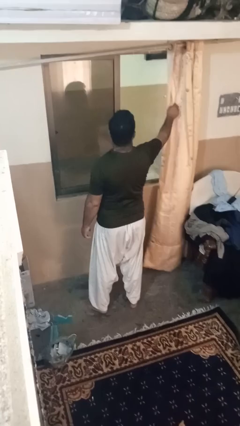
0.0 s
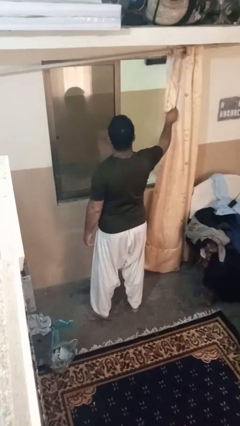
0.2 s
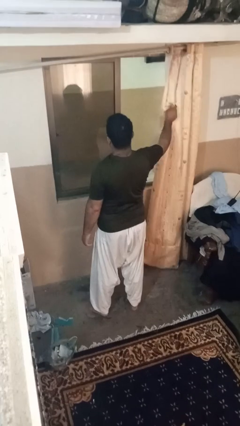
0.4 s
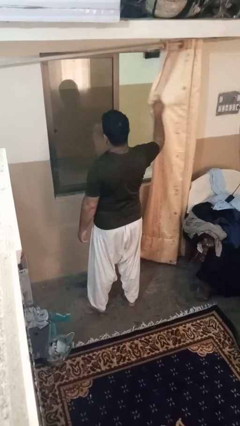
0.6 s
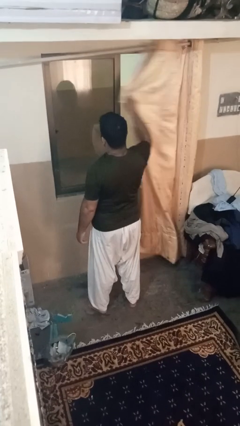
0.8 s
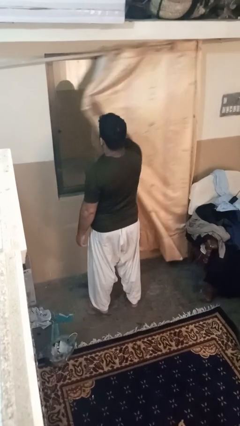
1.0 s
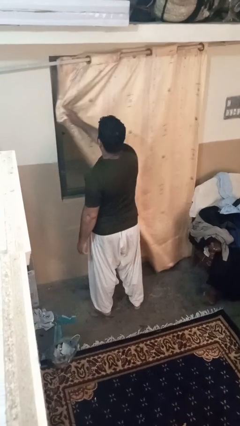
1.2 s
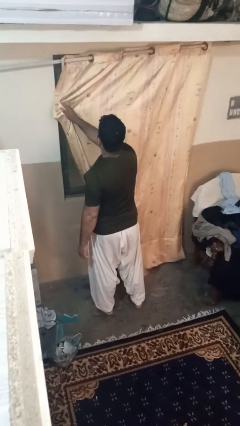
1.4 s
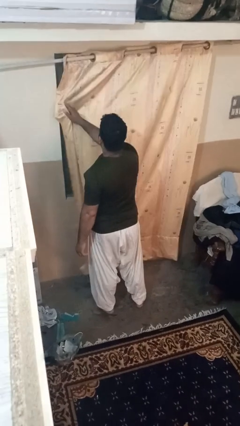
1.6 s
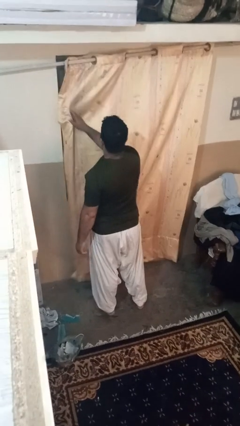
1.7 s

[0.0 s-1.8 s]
person closes curtains

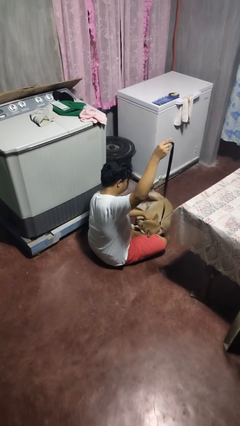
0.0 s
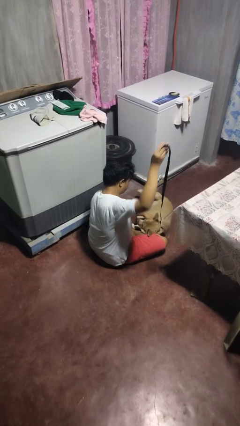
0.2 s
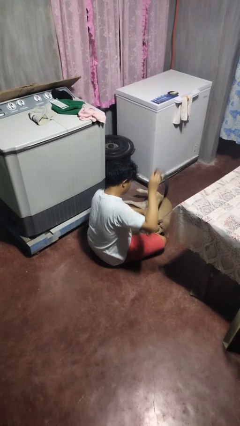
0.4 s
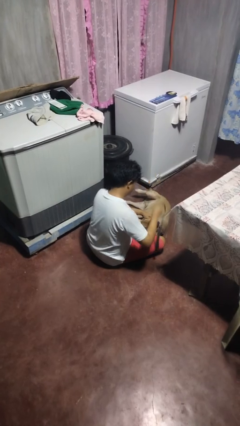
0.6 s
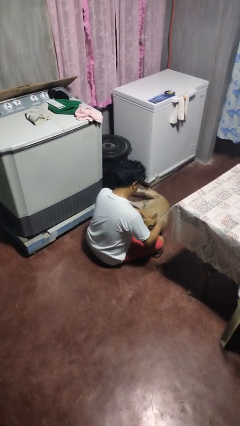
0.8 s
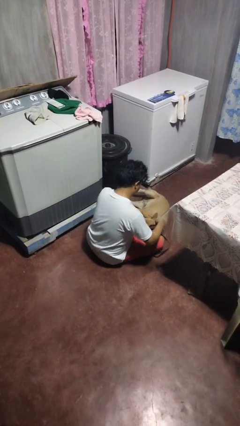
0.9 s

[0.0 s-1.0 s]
person unattaches leash from dog

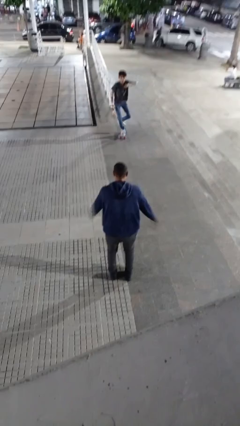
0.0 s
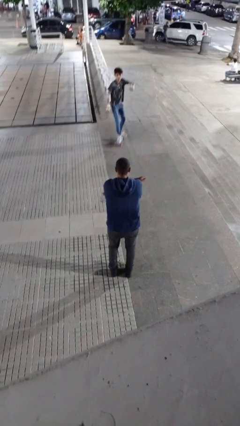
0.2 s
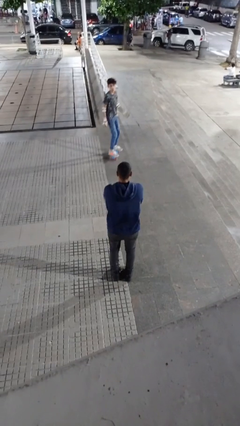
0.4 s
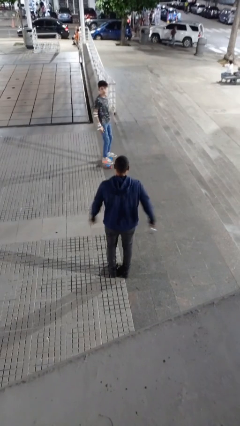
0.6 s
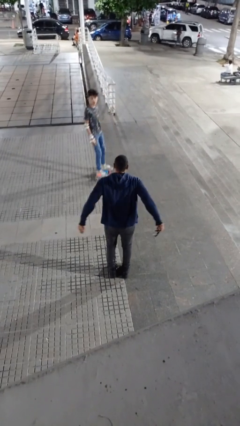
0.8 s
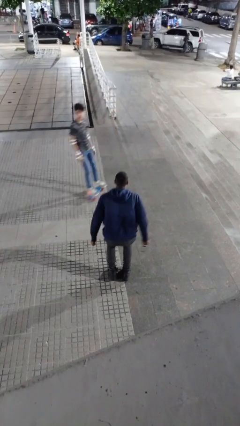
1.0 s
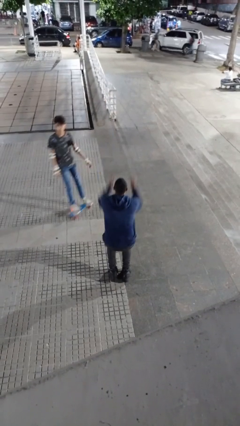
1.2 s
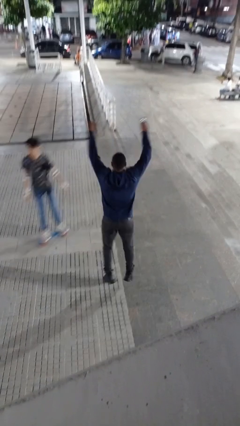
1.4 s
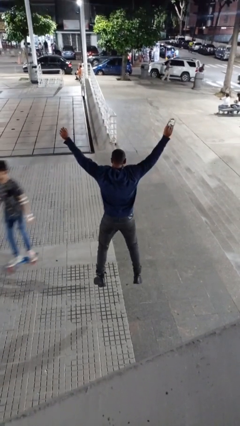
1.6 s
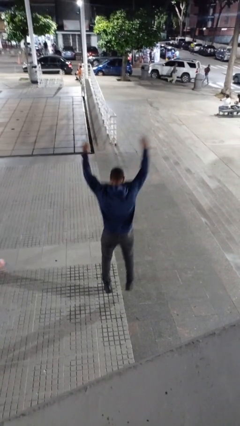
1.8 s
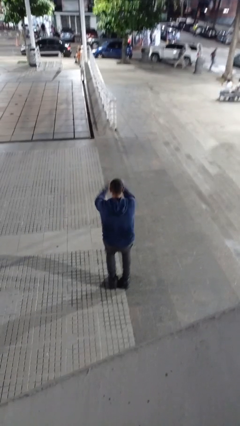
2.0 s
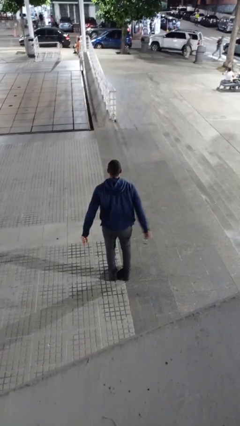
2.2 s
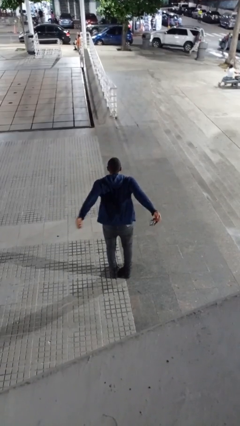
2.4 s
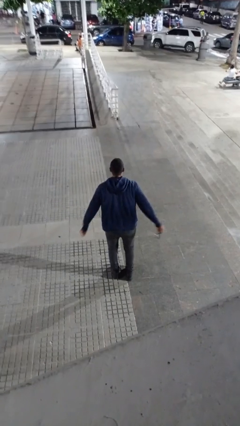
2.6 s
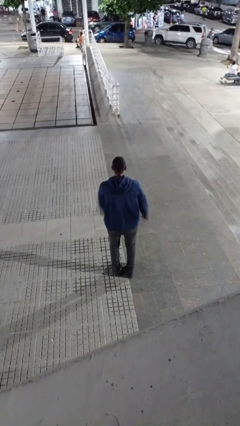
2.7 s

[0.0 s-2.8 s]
person jumps

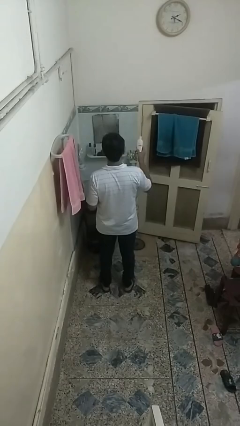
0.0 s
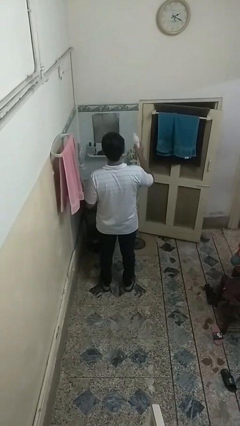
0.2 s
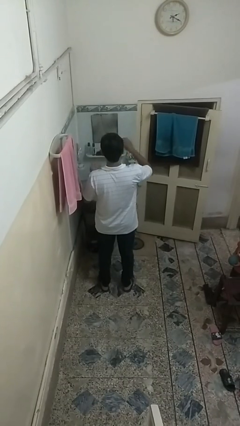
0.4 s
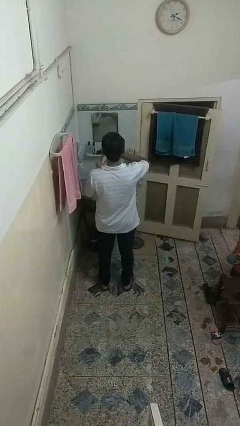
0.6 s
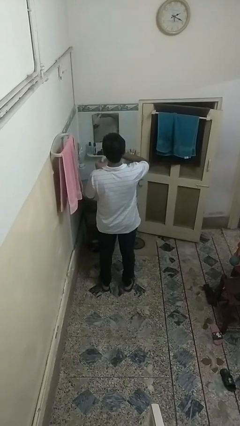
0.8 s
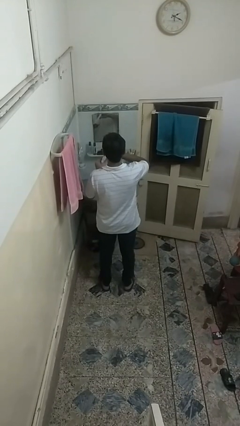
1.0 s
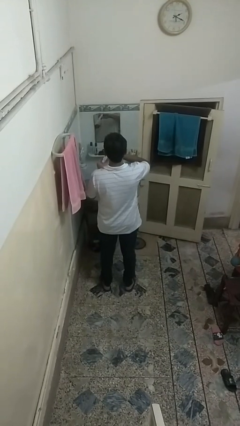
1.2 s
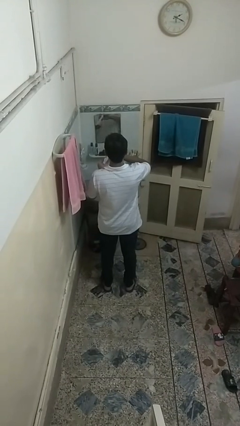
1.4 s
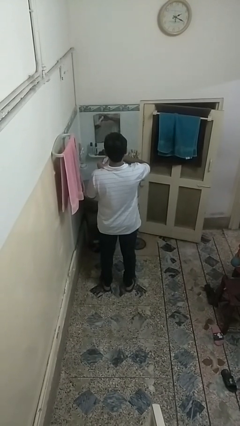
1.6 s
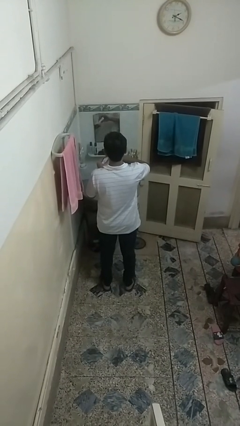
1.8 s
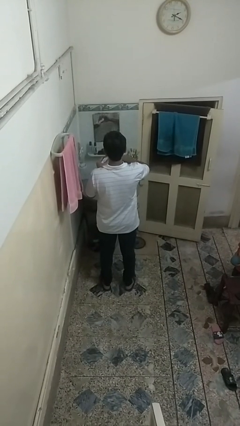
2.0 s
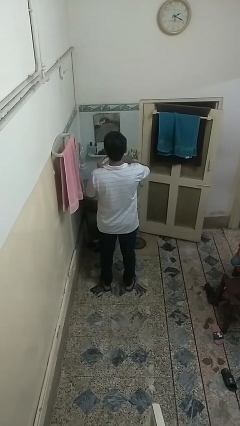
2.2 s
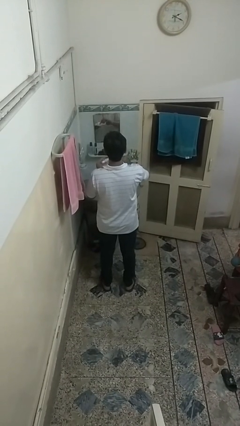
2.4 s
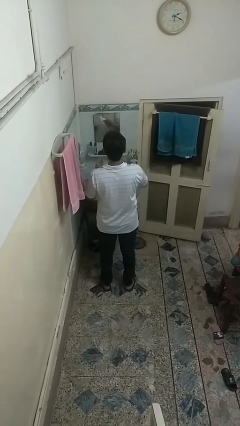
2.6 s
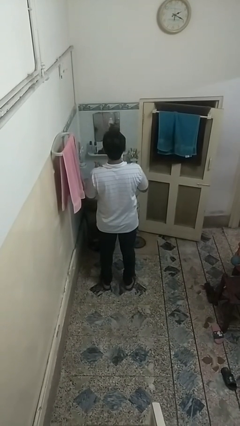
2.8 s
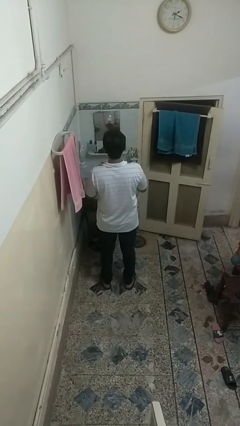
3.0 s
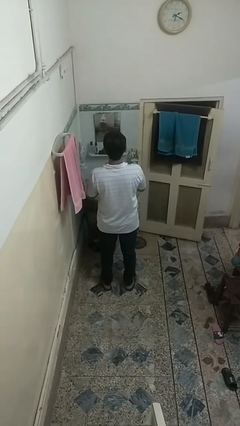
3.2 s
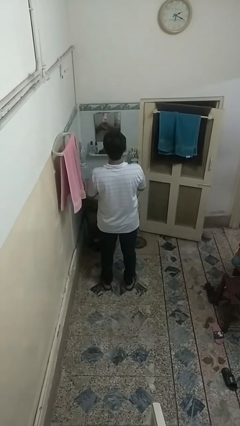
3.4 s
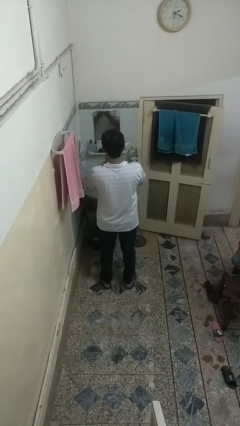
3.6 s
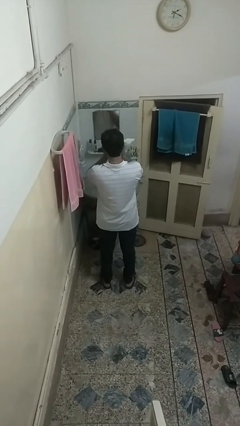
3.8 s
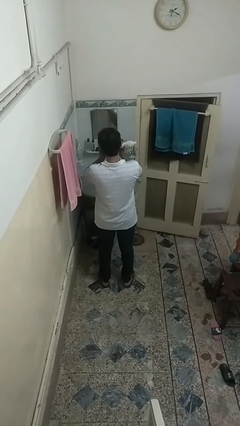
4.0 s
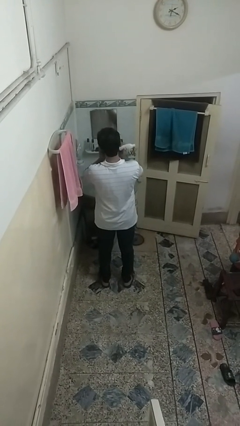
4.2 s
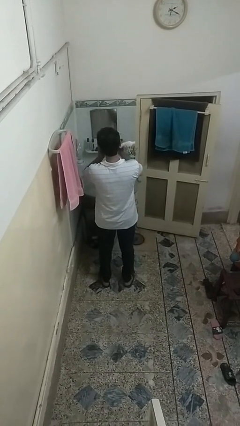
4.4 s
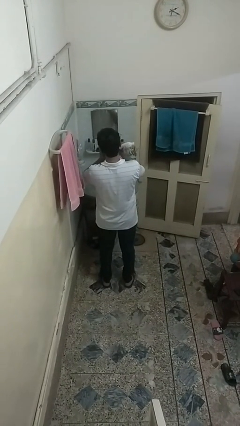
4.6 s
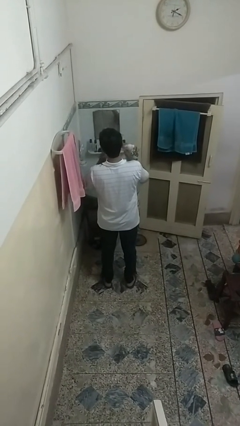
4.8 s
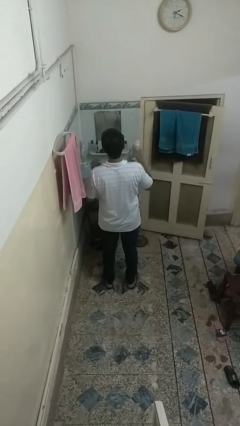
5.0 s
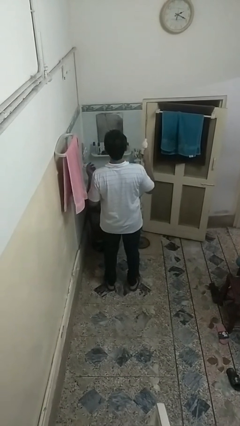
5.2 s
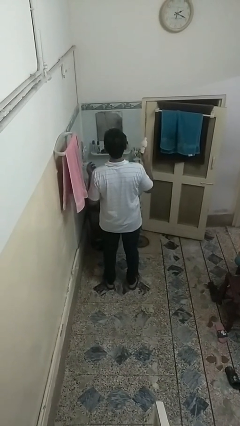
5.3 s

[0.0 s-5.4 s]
person applies facial moisturizer

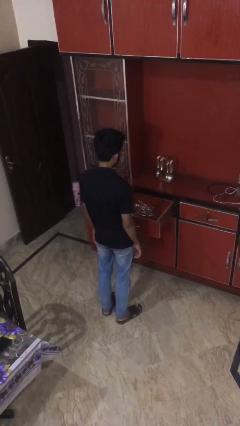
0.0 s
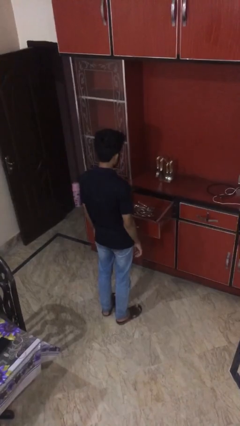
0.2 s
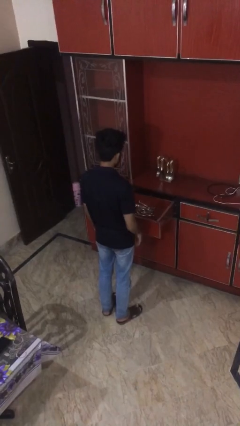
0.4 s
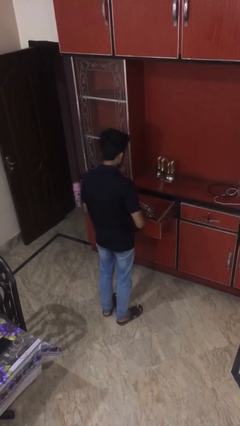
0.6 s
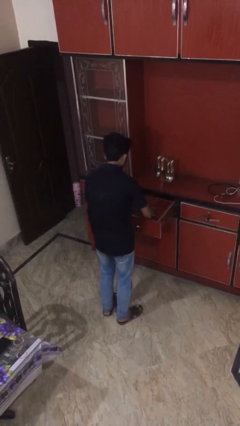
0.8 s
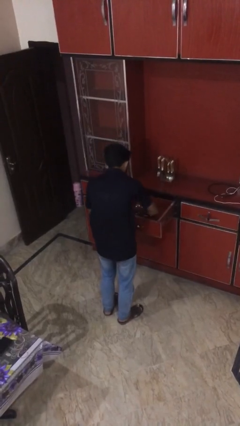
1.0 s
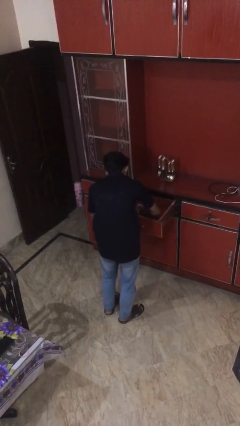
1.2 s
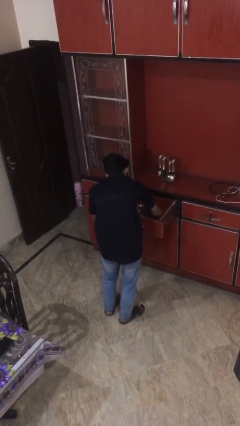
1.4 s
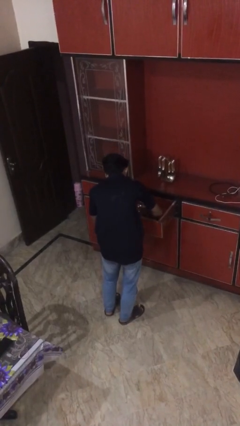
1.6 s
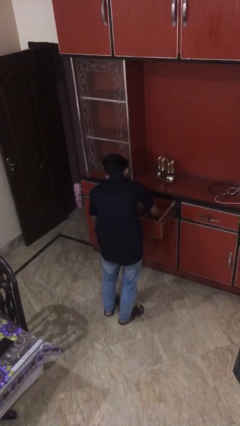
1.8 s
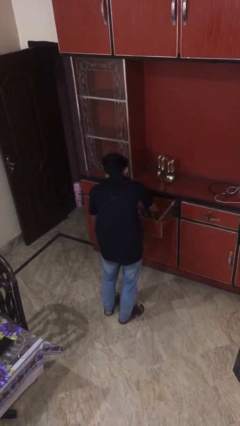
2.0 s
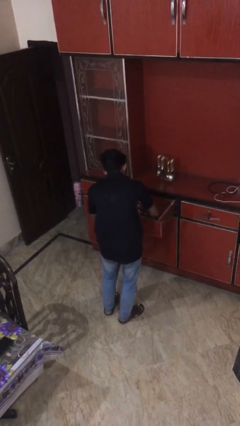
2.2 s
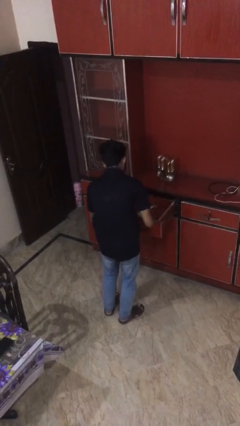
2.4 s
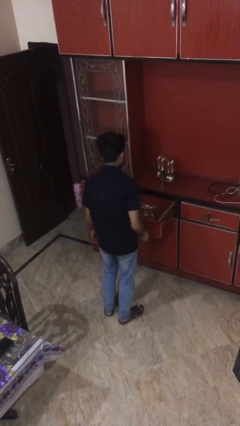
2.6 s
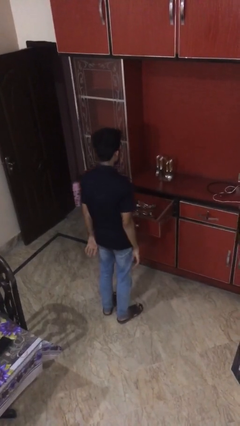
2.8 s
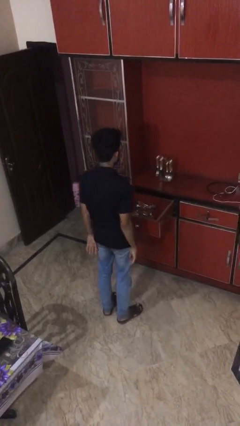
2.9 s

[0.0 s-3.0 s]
person searches in kitchen drawer

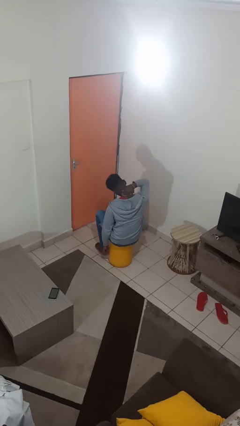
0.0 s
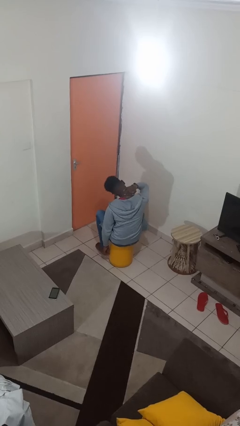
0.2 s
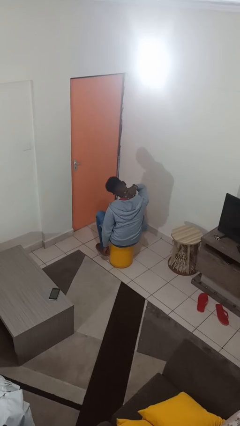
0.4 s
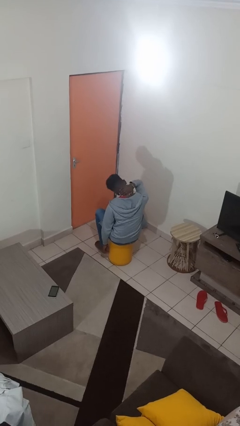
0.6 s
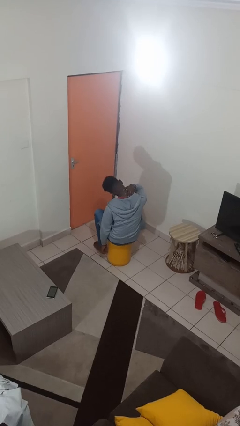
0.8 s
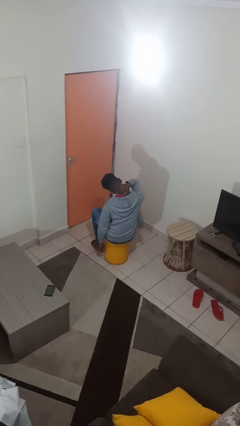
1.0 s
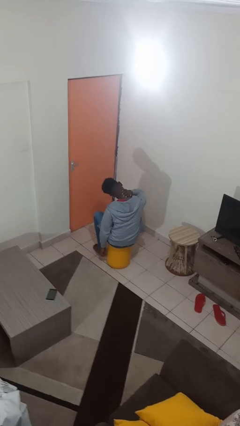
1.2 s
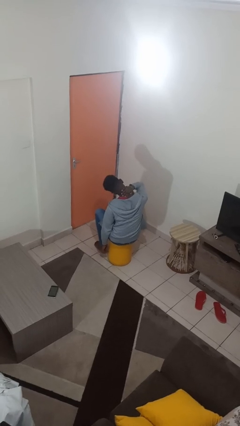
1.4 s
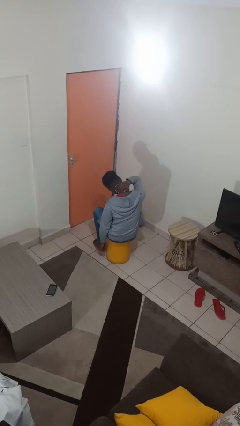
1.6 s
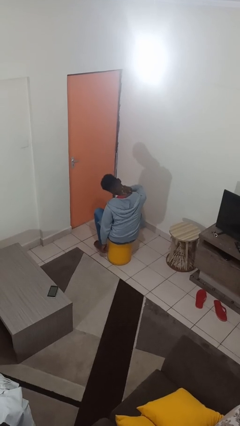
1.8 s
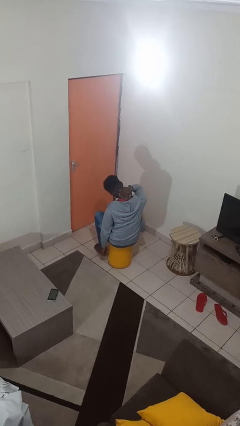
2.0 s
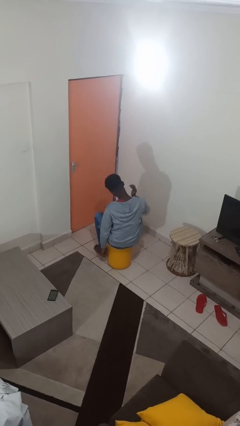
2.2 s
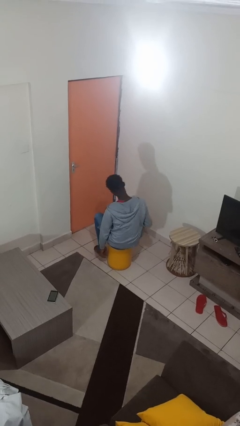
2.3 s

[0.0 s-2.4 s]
person rubs neck

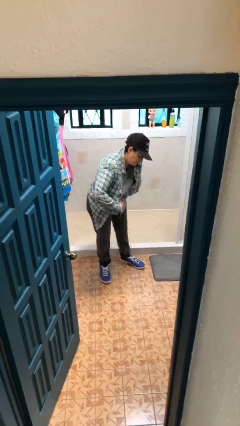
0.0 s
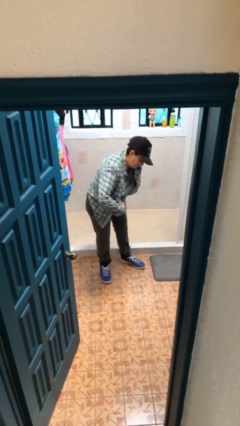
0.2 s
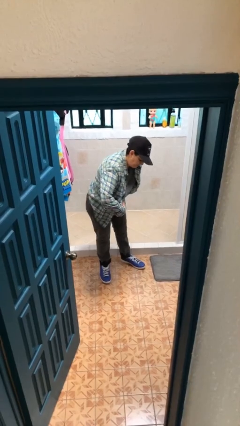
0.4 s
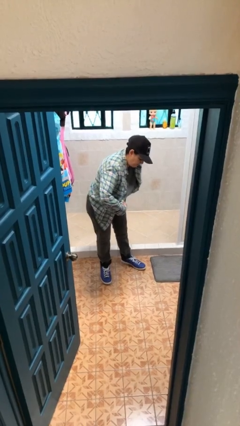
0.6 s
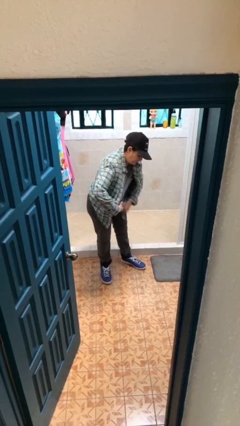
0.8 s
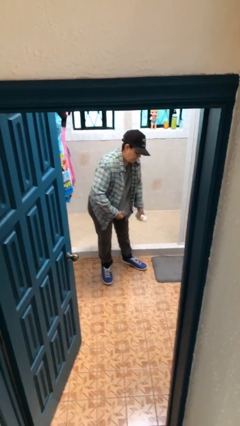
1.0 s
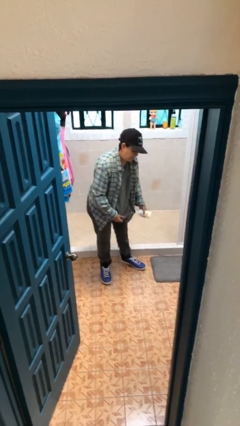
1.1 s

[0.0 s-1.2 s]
person applies deodorant

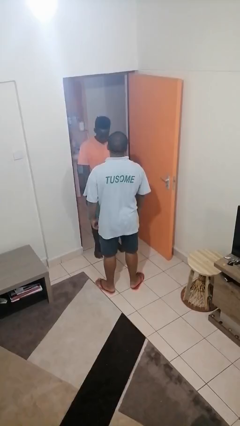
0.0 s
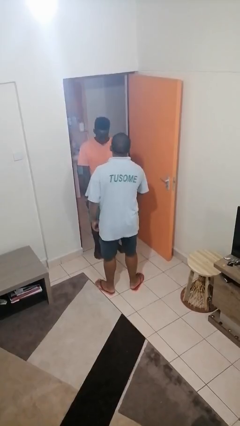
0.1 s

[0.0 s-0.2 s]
person grabs person by forearm
